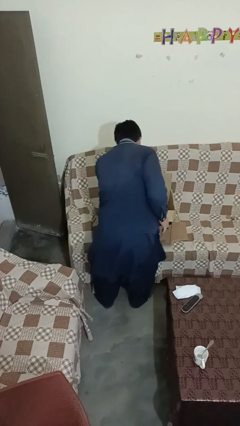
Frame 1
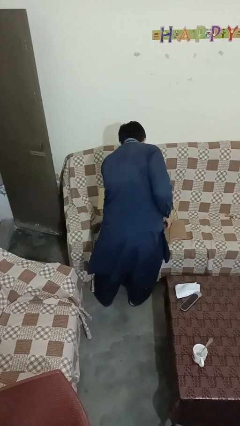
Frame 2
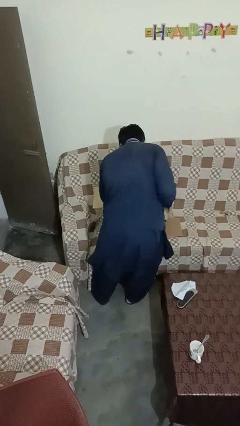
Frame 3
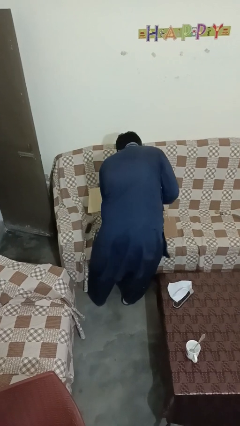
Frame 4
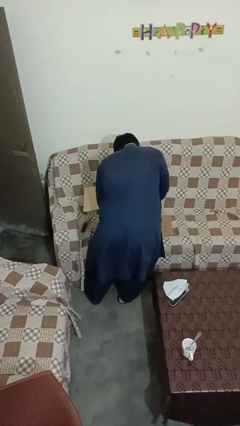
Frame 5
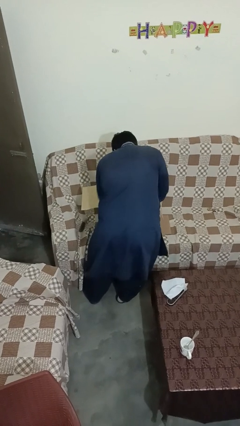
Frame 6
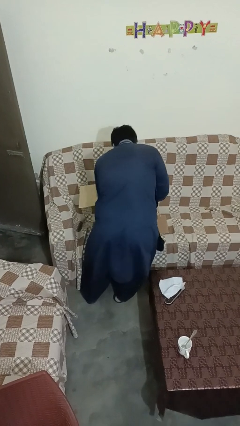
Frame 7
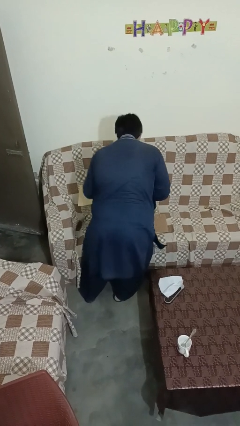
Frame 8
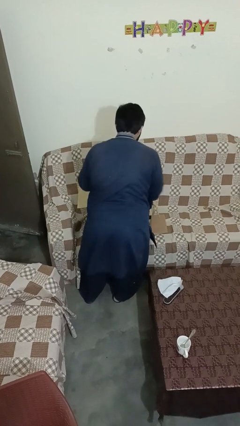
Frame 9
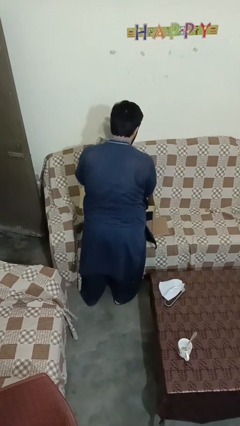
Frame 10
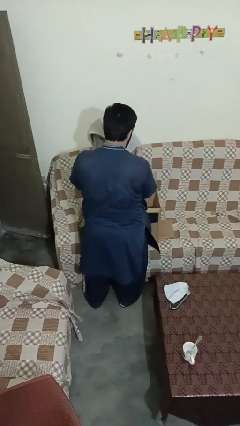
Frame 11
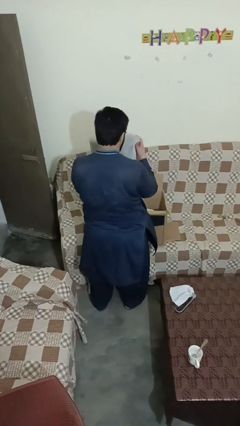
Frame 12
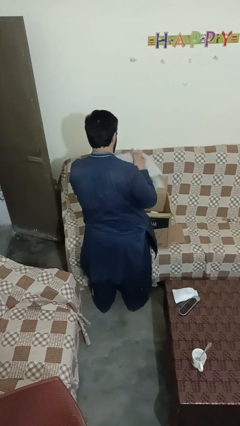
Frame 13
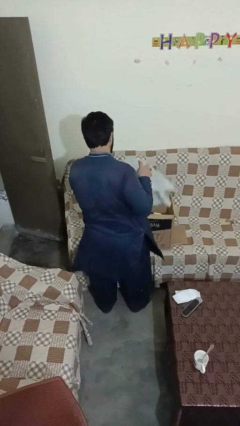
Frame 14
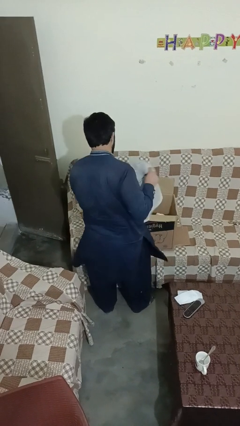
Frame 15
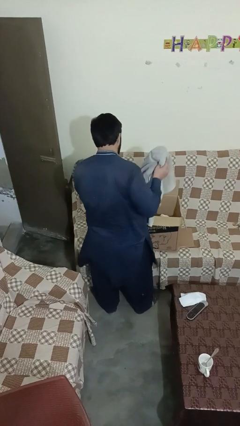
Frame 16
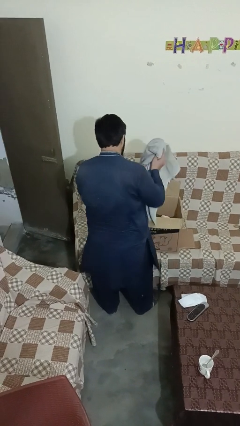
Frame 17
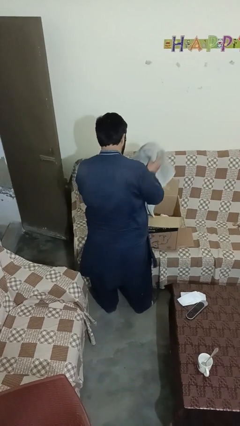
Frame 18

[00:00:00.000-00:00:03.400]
person searches in box

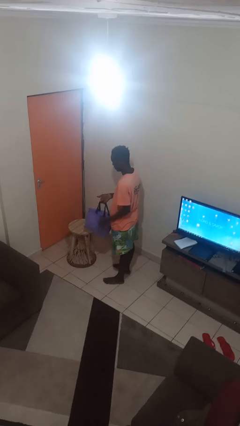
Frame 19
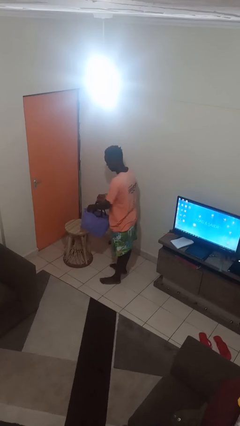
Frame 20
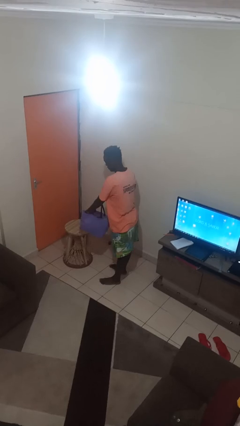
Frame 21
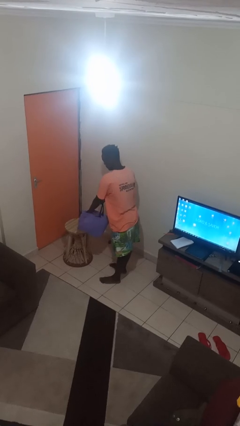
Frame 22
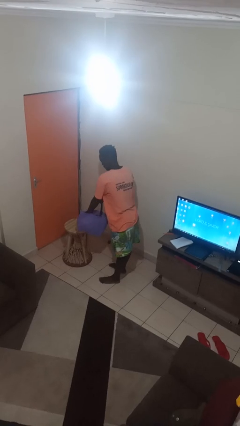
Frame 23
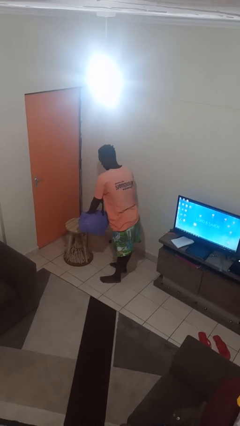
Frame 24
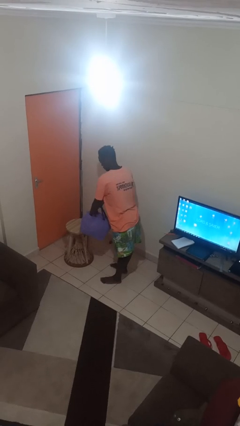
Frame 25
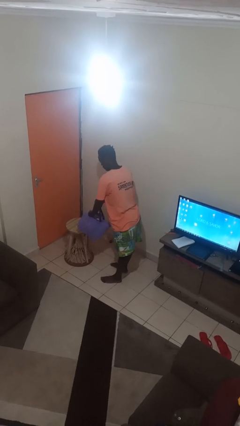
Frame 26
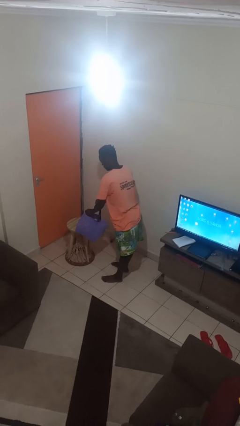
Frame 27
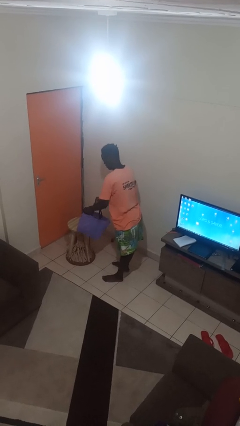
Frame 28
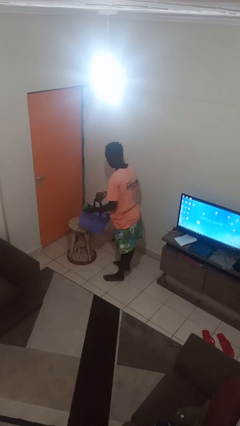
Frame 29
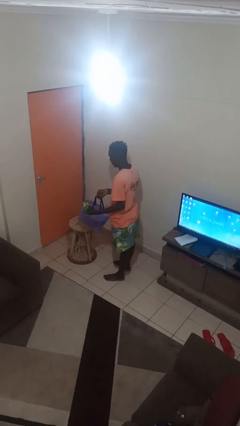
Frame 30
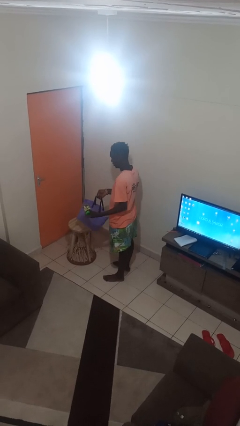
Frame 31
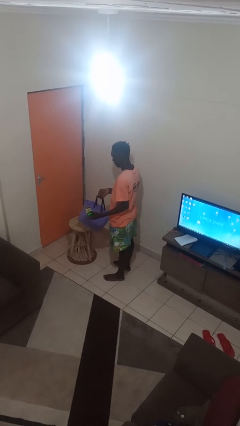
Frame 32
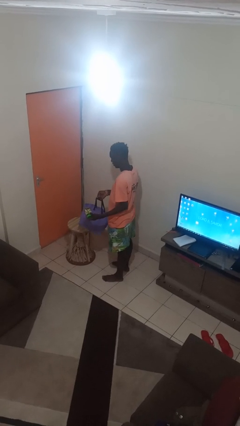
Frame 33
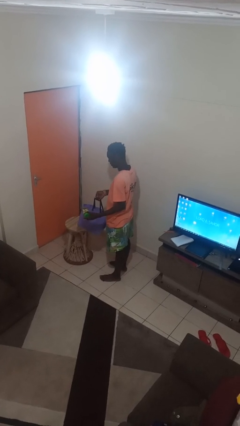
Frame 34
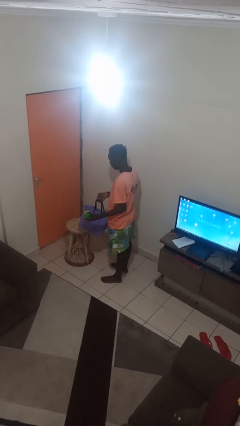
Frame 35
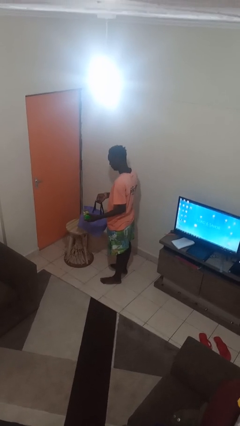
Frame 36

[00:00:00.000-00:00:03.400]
person takes object from bag

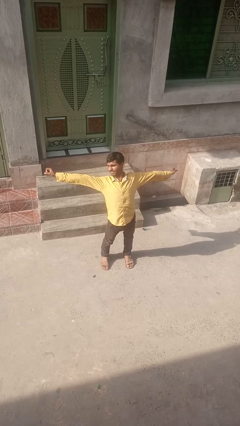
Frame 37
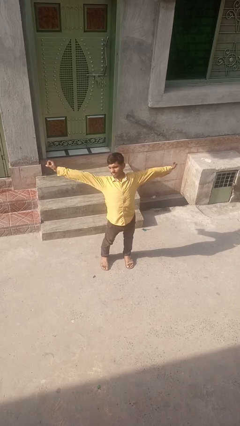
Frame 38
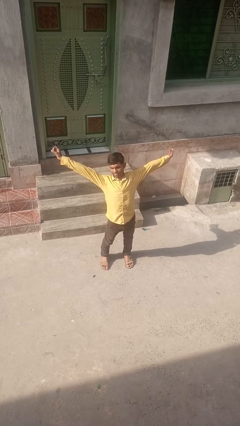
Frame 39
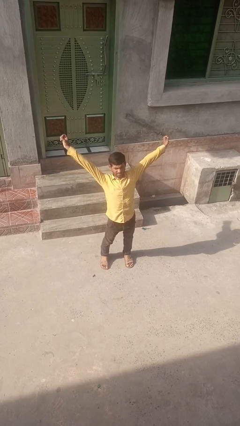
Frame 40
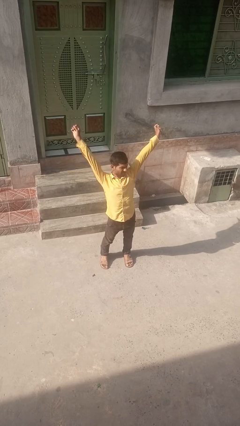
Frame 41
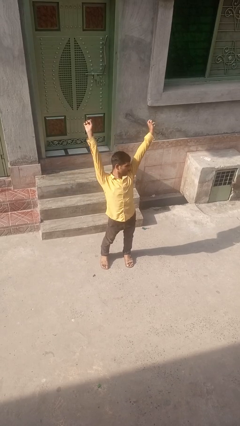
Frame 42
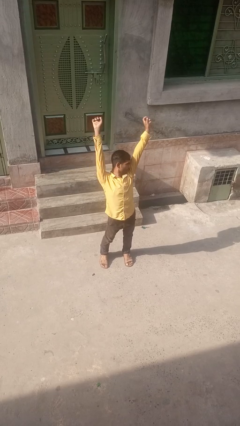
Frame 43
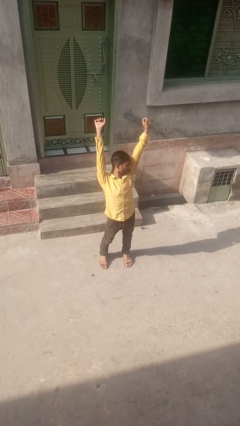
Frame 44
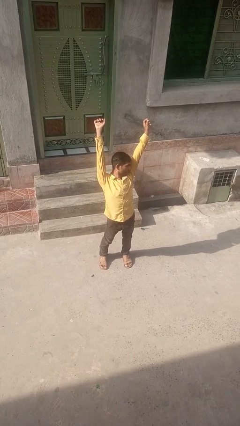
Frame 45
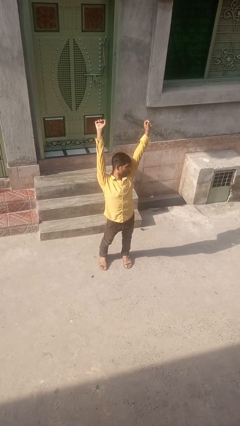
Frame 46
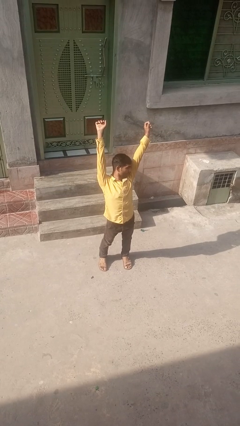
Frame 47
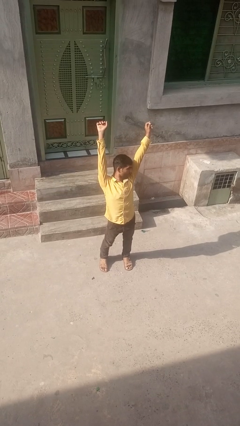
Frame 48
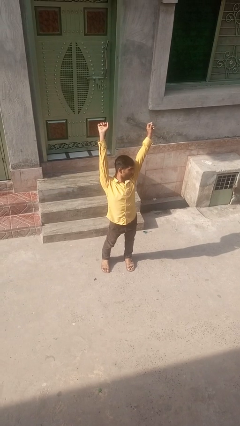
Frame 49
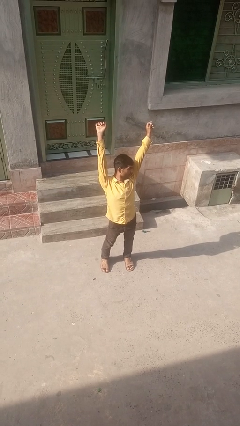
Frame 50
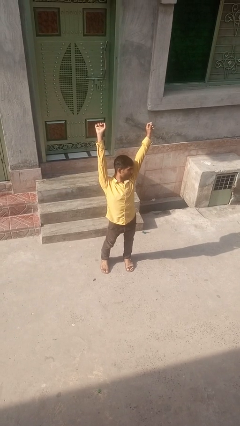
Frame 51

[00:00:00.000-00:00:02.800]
person stretches arms over head

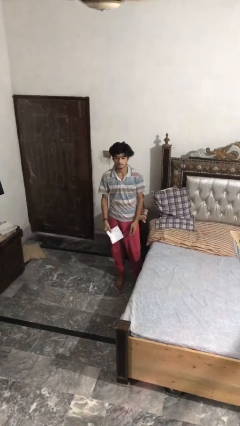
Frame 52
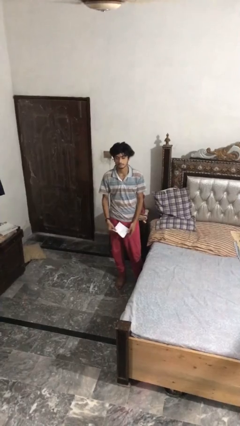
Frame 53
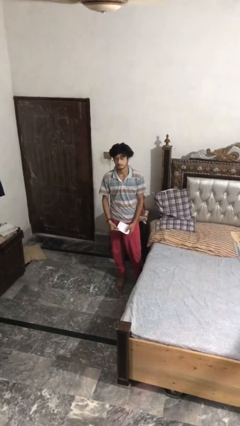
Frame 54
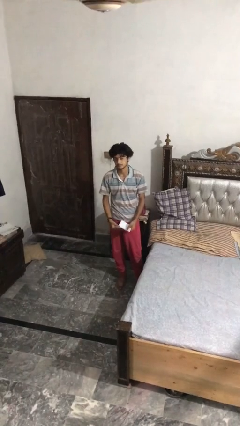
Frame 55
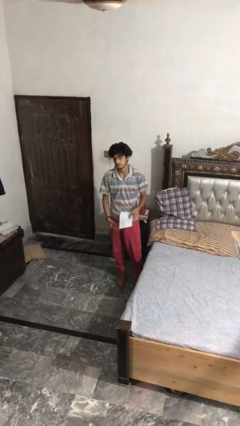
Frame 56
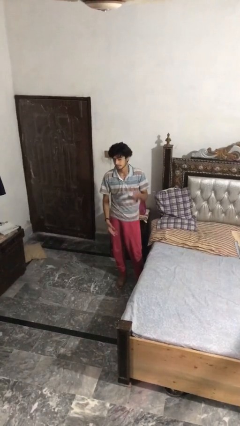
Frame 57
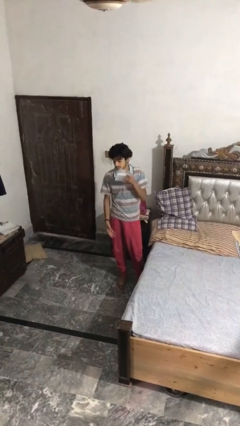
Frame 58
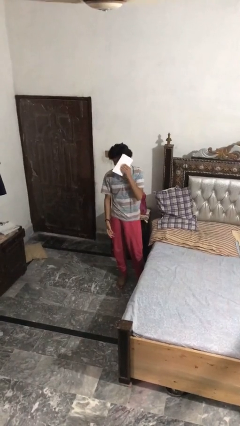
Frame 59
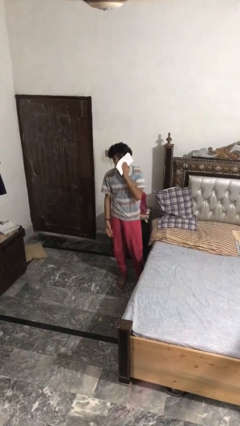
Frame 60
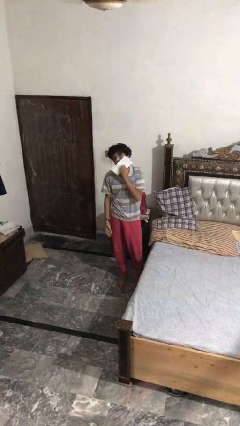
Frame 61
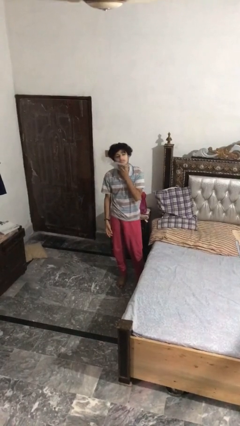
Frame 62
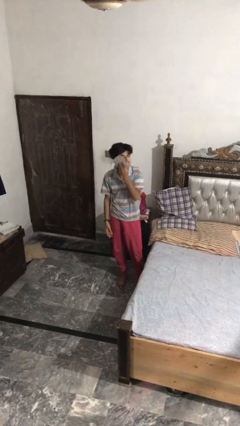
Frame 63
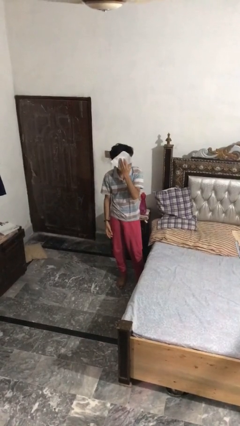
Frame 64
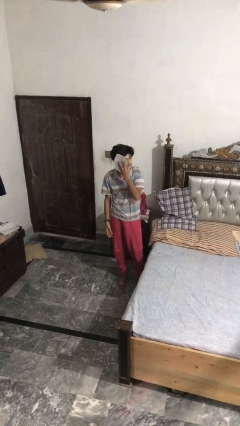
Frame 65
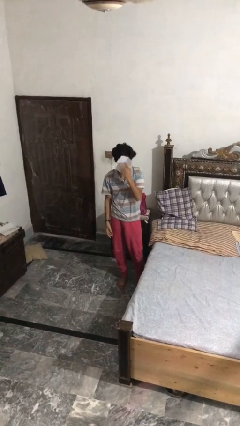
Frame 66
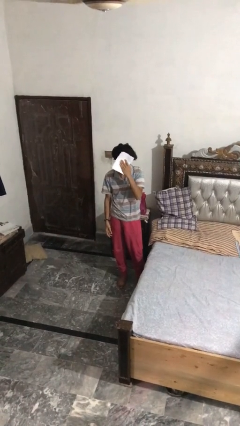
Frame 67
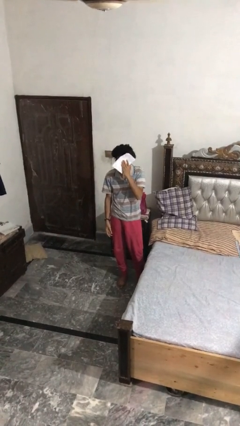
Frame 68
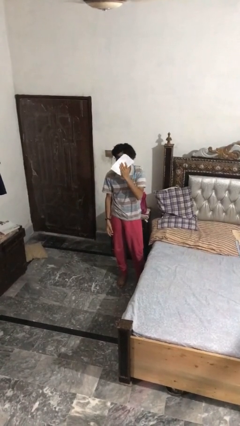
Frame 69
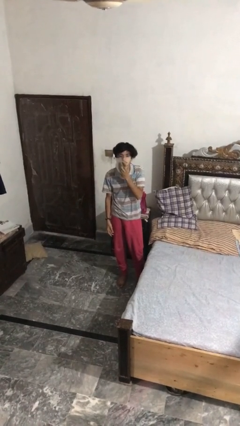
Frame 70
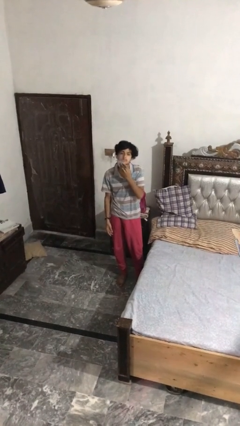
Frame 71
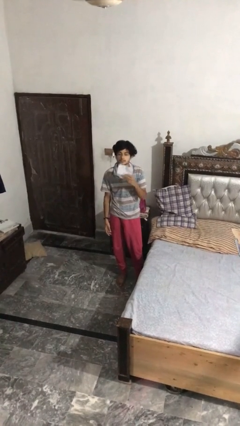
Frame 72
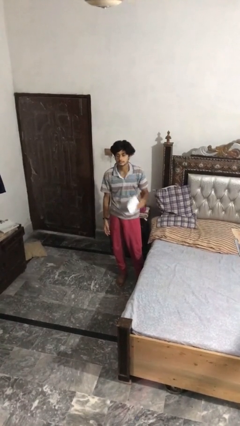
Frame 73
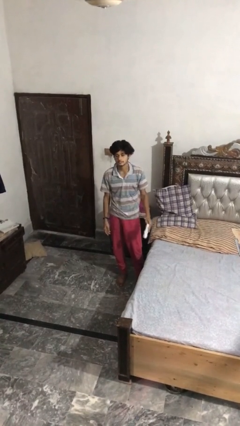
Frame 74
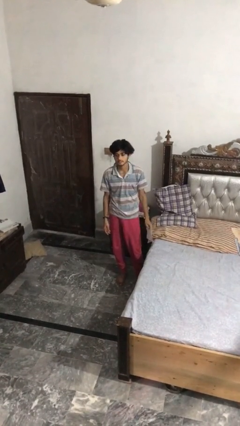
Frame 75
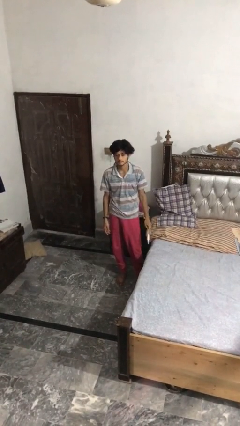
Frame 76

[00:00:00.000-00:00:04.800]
person wipes mouth with napkin

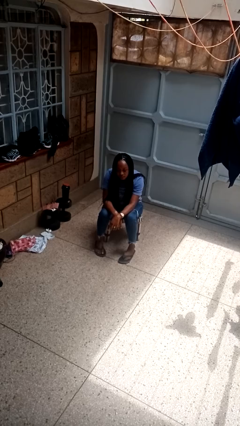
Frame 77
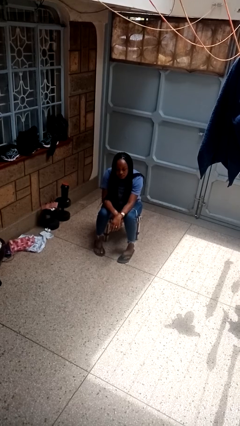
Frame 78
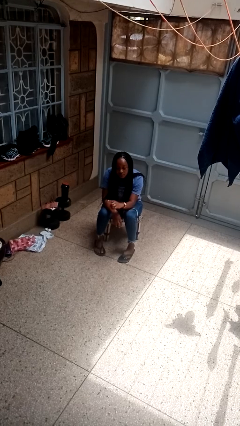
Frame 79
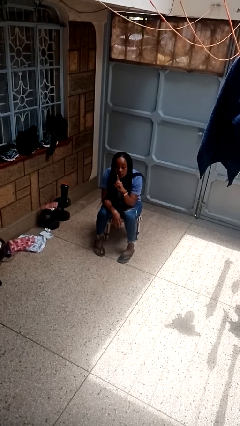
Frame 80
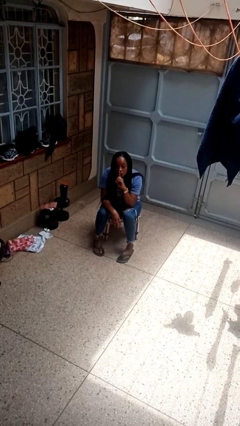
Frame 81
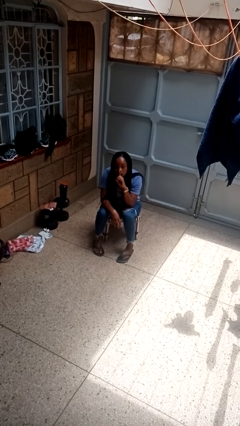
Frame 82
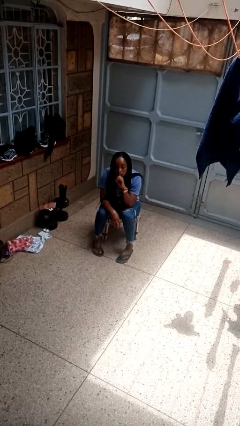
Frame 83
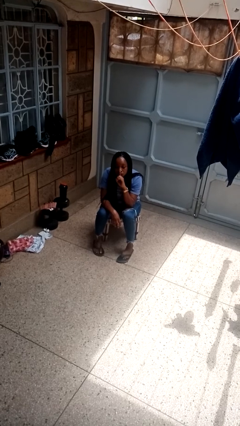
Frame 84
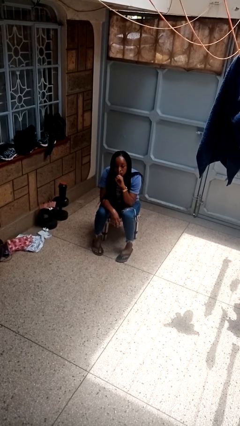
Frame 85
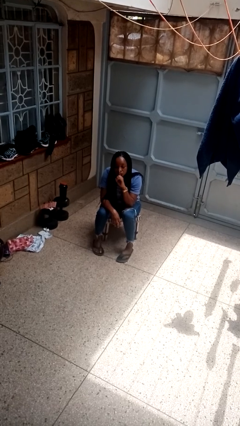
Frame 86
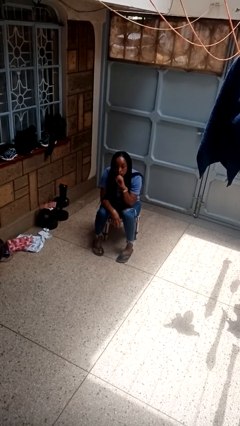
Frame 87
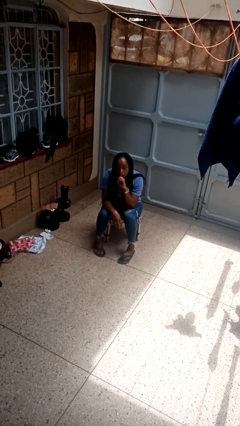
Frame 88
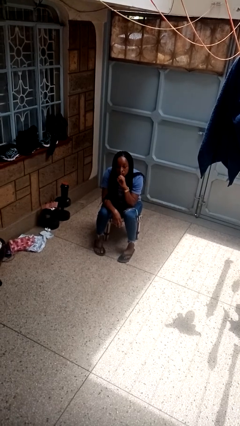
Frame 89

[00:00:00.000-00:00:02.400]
person gestures be quiet

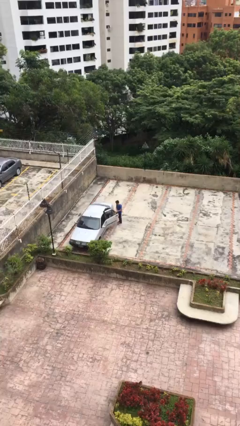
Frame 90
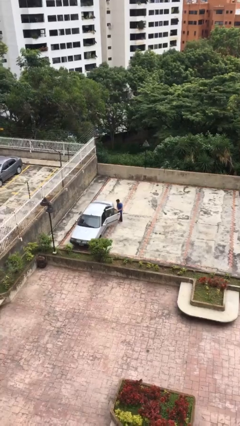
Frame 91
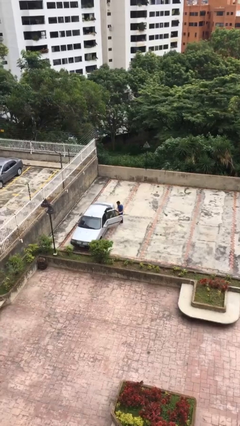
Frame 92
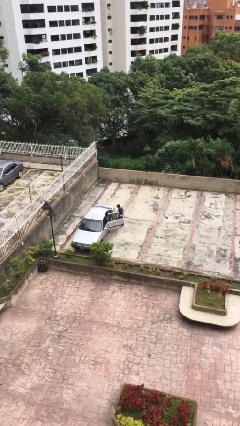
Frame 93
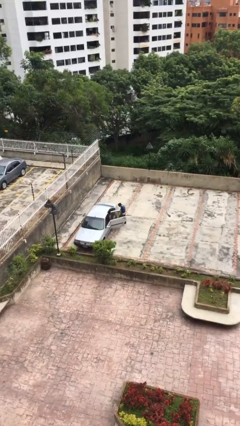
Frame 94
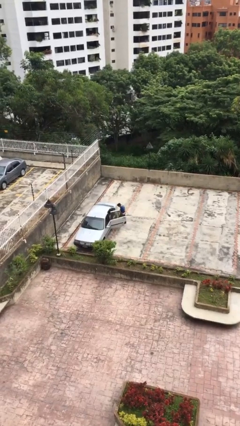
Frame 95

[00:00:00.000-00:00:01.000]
person opens car door
